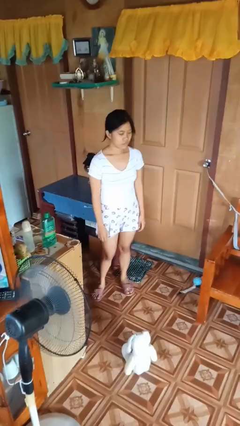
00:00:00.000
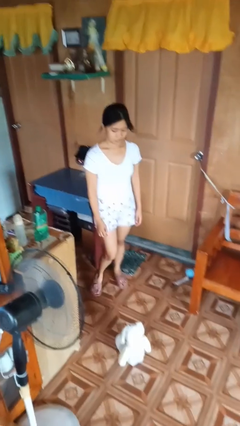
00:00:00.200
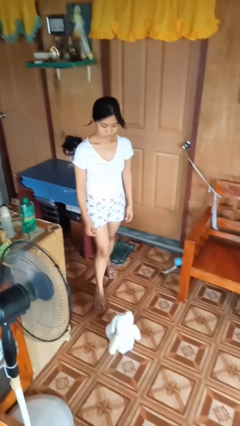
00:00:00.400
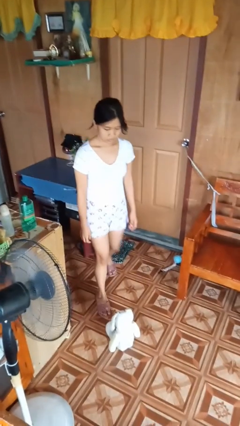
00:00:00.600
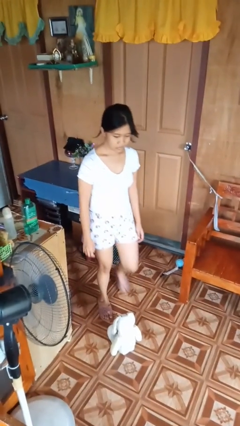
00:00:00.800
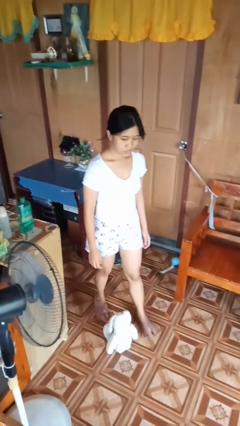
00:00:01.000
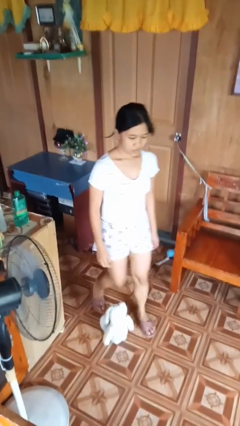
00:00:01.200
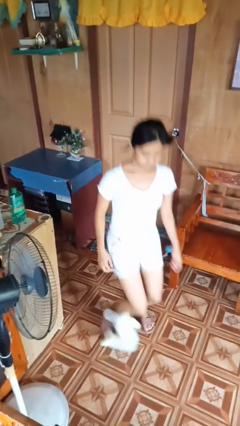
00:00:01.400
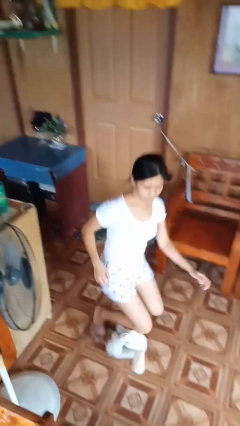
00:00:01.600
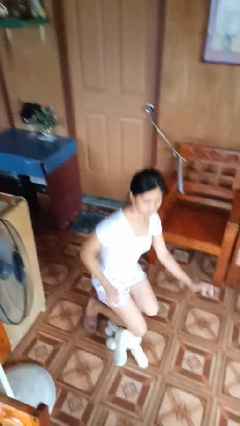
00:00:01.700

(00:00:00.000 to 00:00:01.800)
person trips on object on floor

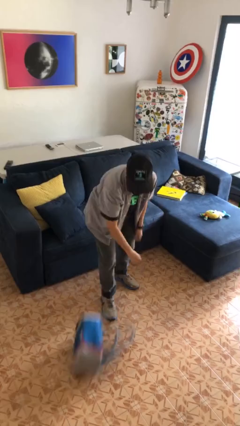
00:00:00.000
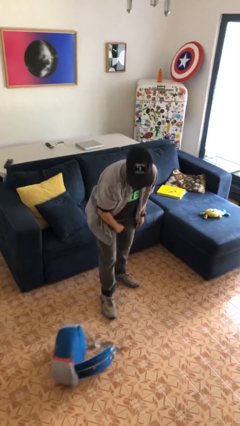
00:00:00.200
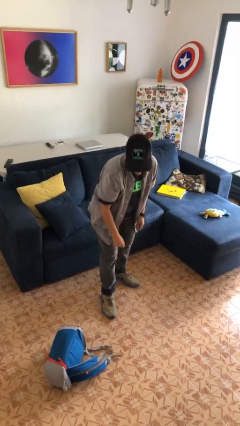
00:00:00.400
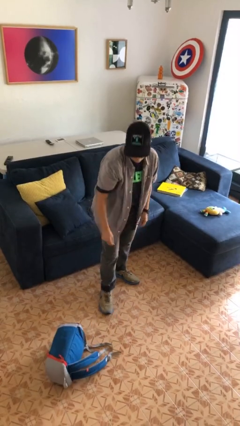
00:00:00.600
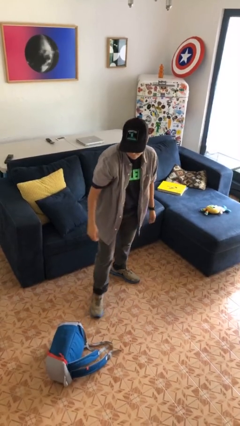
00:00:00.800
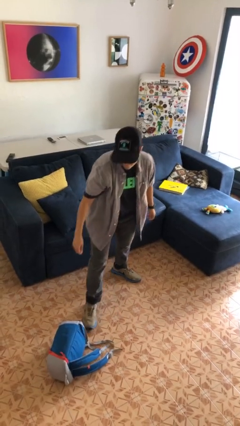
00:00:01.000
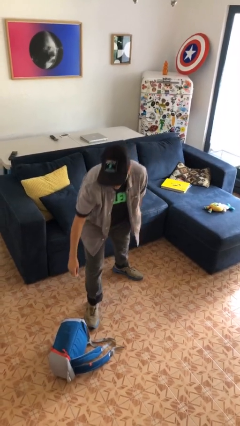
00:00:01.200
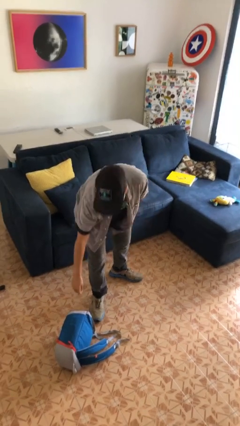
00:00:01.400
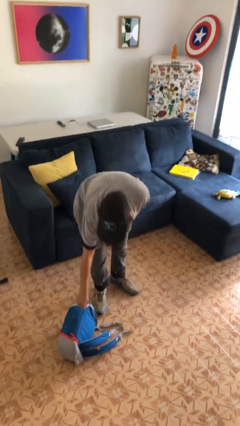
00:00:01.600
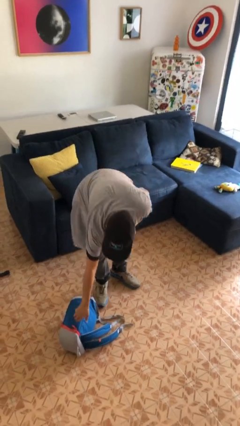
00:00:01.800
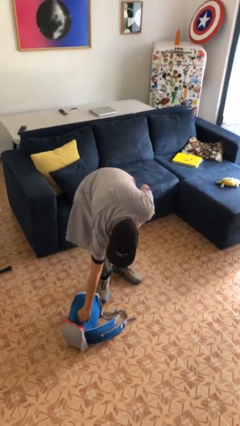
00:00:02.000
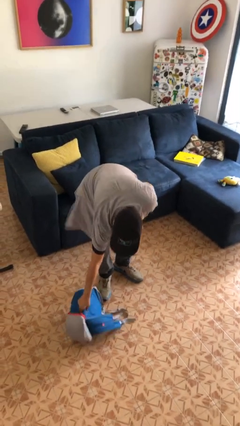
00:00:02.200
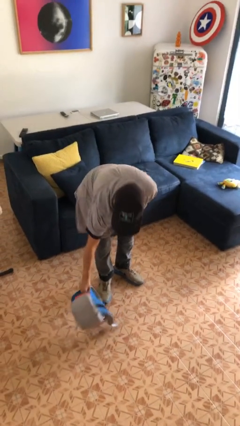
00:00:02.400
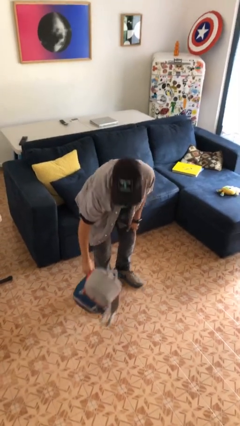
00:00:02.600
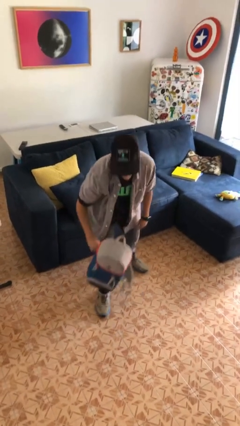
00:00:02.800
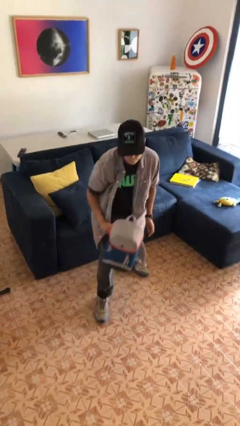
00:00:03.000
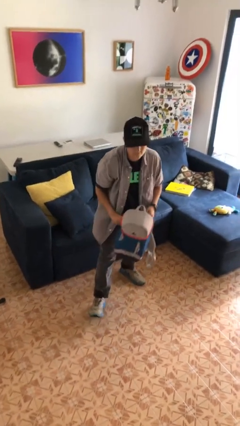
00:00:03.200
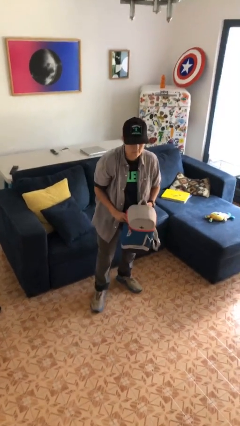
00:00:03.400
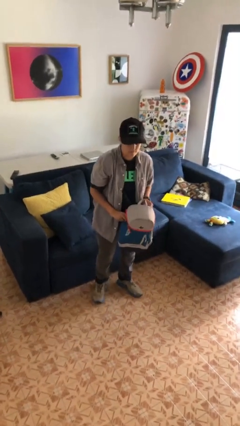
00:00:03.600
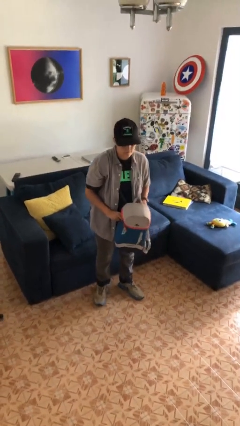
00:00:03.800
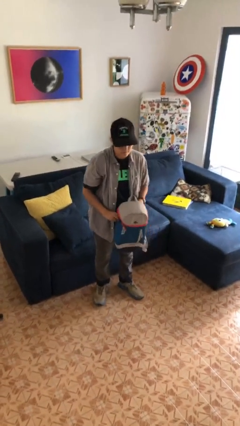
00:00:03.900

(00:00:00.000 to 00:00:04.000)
person picks up object from floor

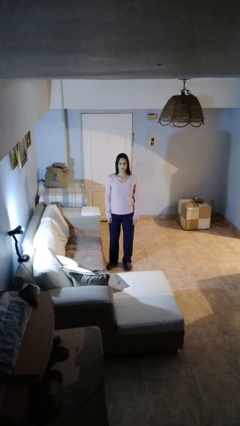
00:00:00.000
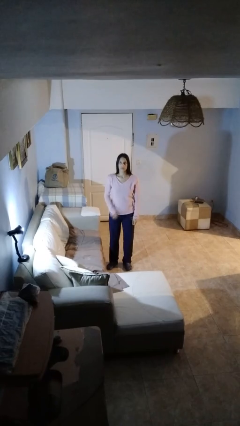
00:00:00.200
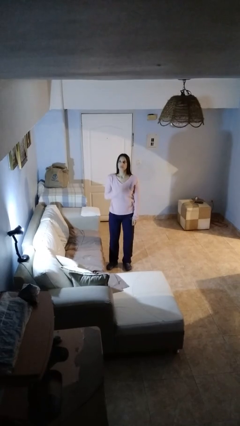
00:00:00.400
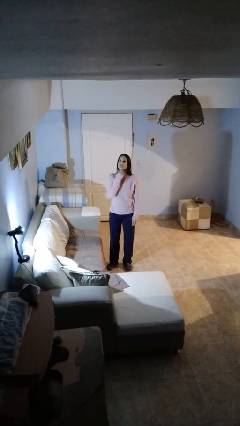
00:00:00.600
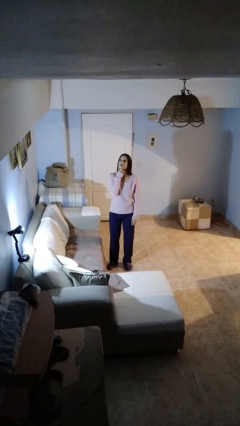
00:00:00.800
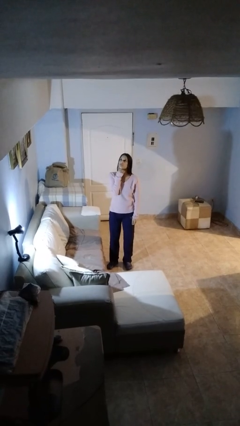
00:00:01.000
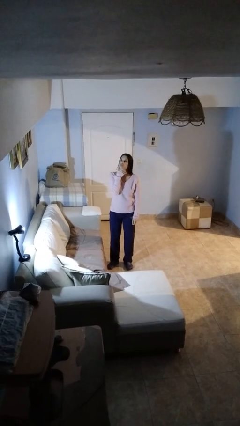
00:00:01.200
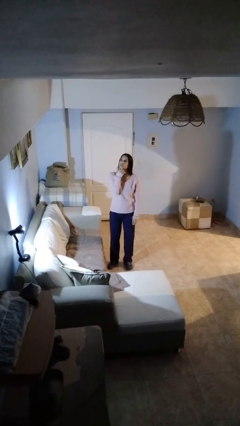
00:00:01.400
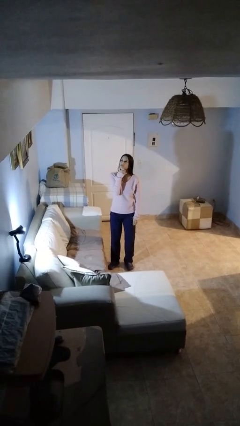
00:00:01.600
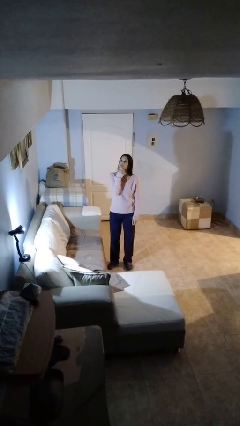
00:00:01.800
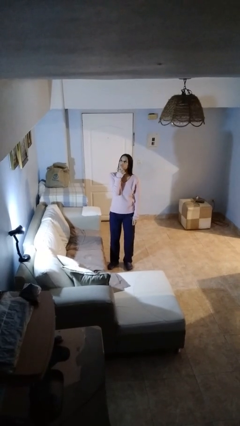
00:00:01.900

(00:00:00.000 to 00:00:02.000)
person strokes chin

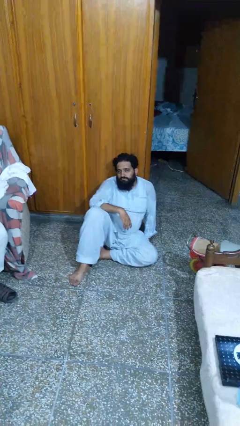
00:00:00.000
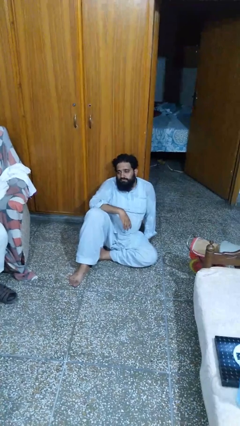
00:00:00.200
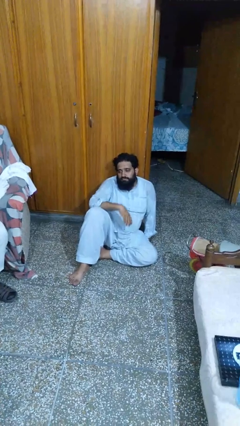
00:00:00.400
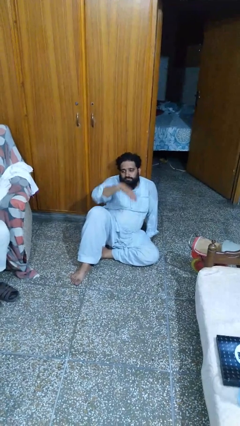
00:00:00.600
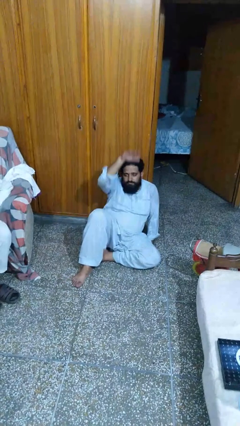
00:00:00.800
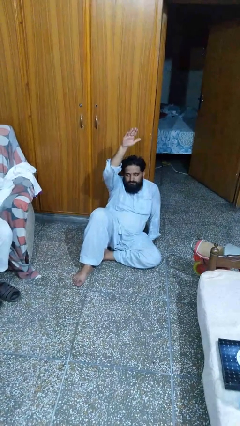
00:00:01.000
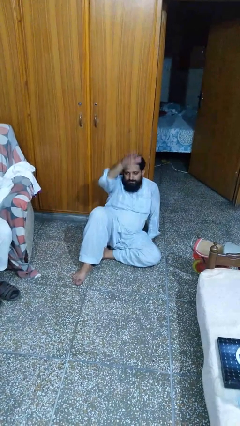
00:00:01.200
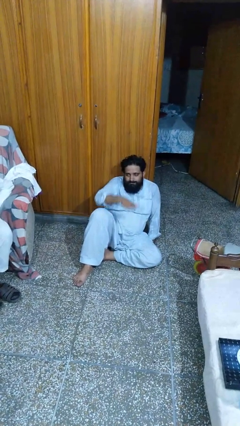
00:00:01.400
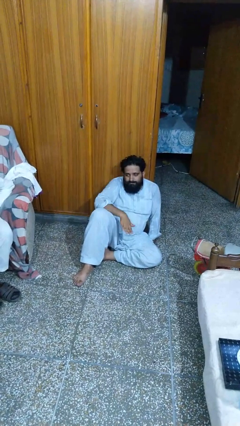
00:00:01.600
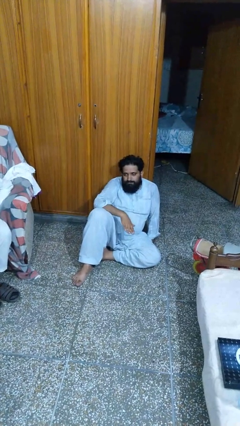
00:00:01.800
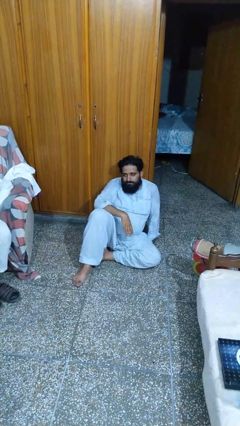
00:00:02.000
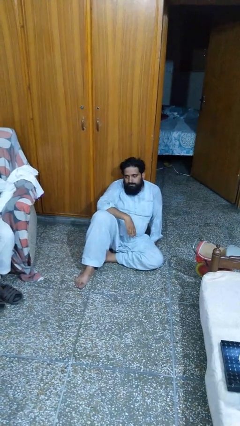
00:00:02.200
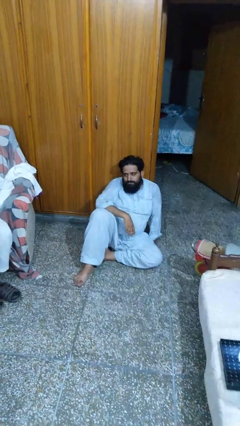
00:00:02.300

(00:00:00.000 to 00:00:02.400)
person gestures swipe down

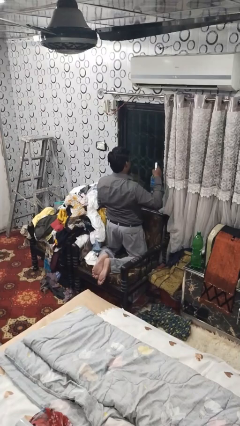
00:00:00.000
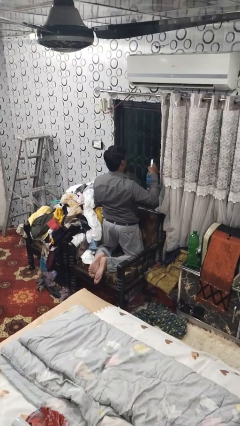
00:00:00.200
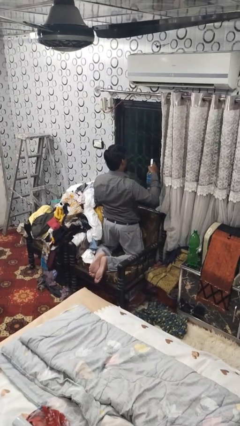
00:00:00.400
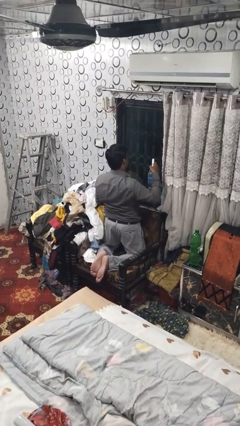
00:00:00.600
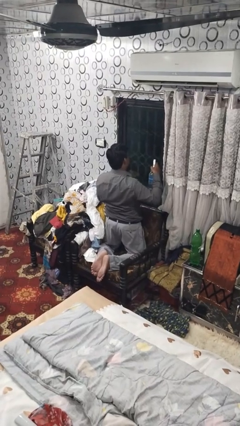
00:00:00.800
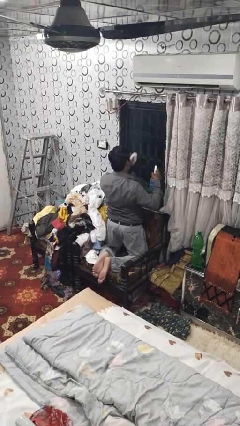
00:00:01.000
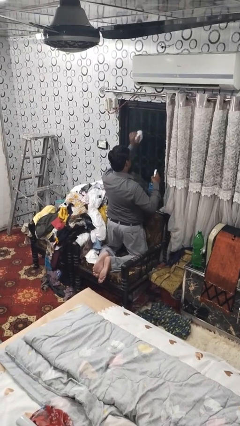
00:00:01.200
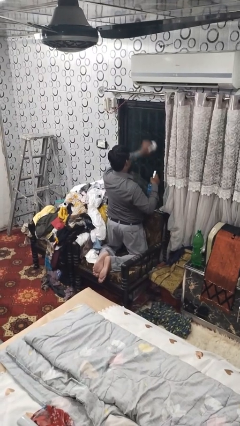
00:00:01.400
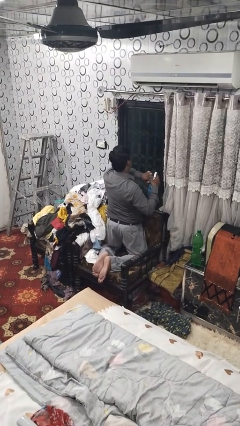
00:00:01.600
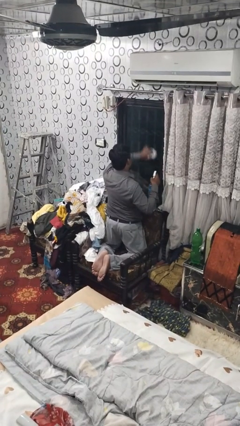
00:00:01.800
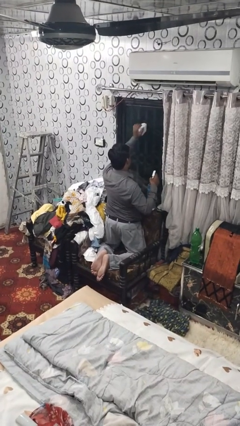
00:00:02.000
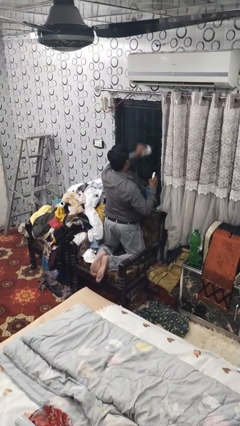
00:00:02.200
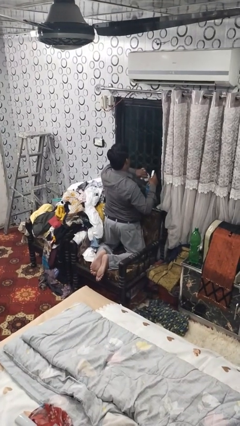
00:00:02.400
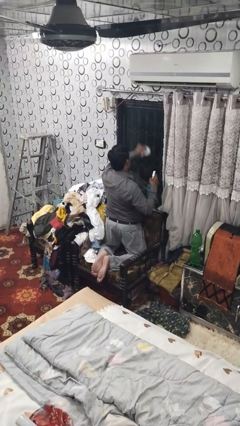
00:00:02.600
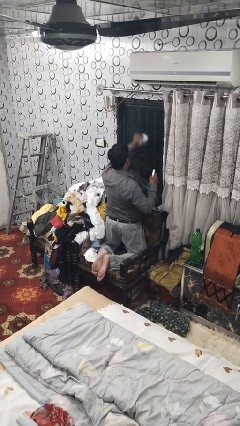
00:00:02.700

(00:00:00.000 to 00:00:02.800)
person washes window

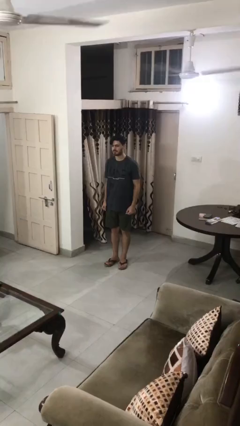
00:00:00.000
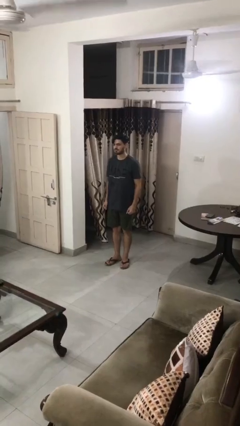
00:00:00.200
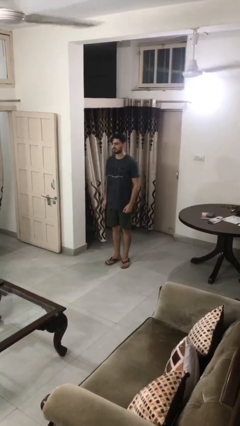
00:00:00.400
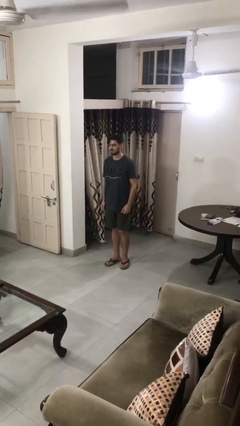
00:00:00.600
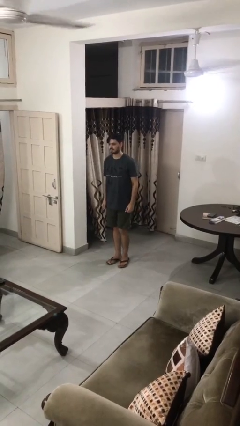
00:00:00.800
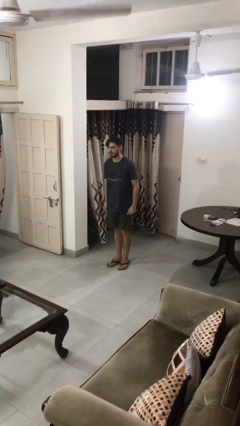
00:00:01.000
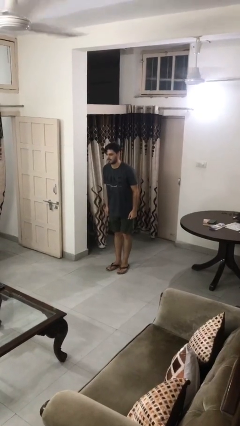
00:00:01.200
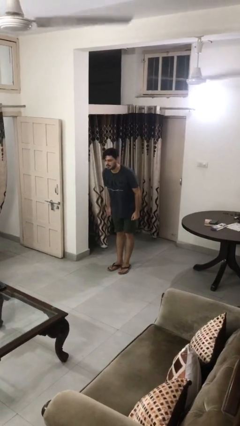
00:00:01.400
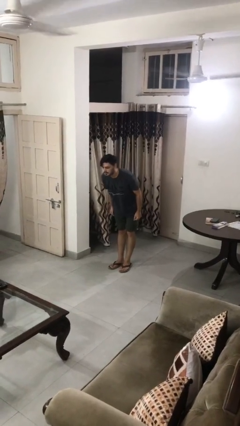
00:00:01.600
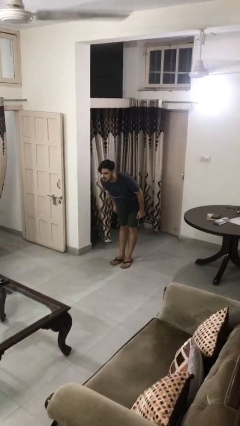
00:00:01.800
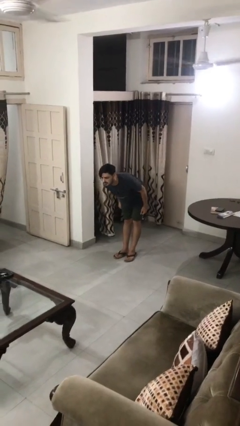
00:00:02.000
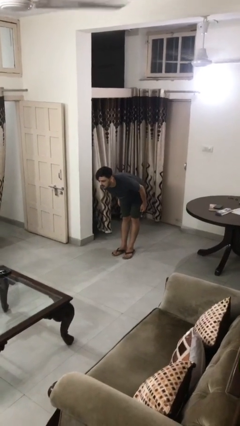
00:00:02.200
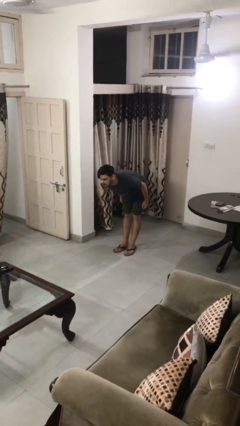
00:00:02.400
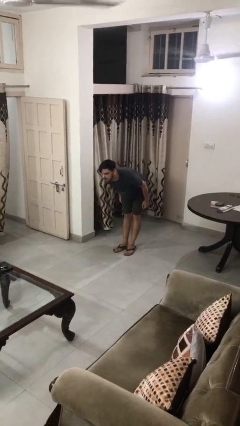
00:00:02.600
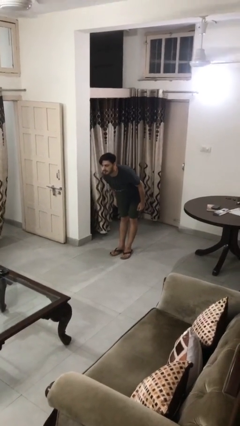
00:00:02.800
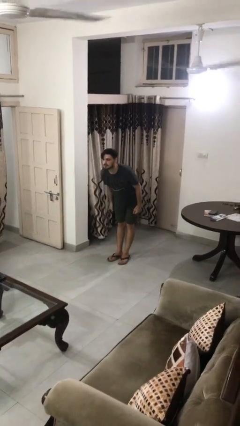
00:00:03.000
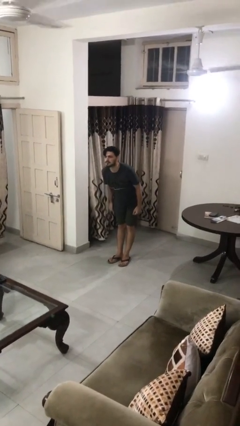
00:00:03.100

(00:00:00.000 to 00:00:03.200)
person bows

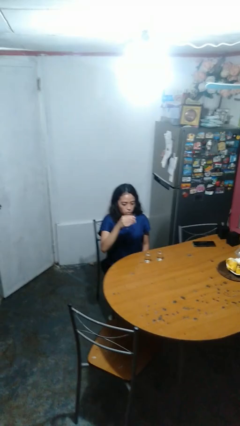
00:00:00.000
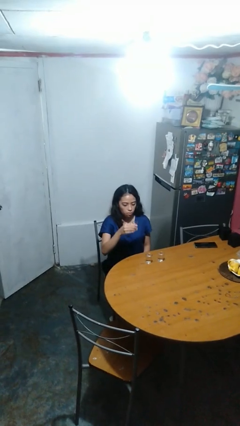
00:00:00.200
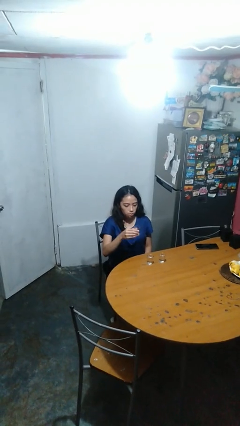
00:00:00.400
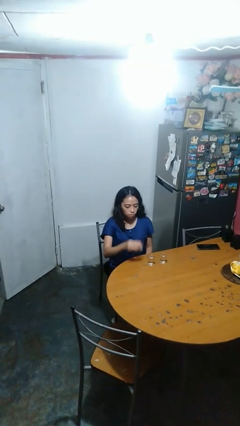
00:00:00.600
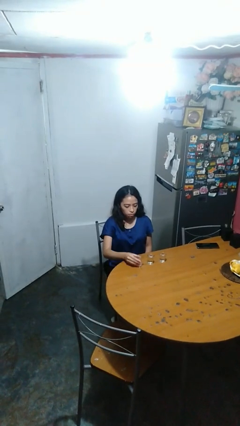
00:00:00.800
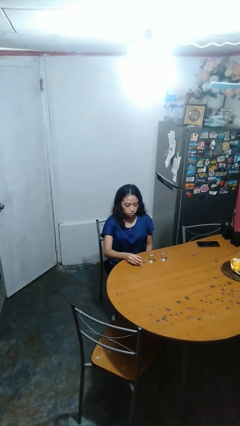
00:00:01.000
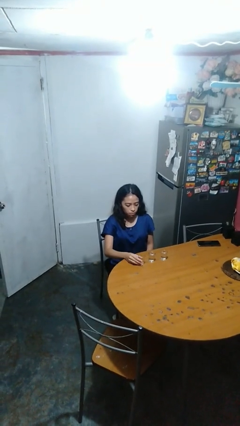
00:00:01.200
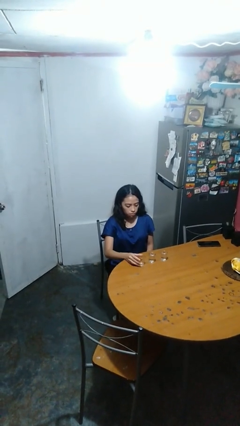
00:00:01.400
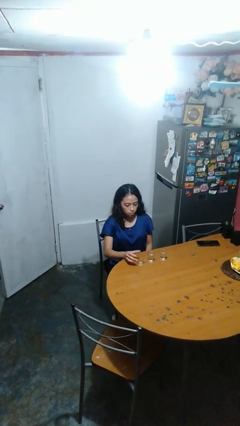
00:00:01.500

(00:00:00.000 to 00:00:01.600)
person puts down object on table
